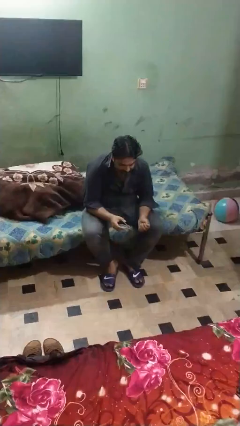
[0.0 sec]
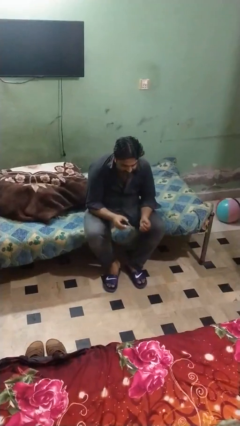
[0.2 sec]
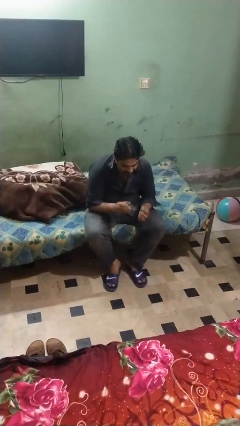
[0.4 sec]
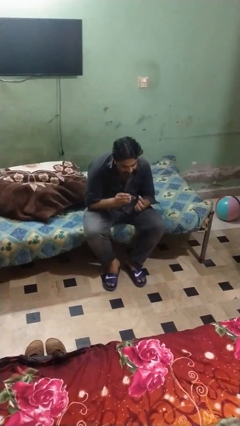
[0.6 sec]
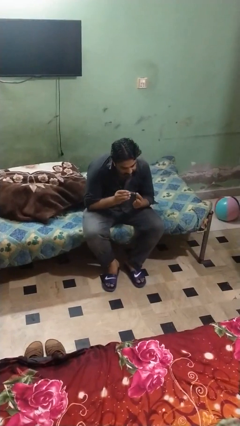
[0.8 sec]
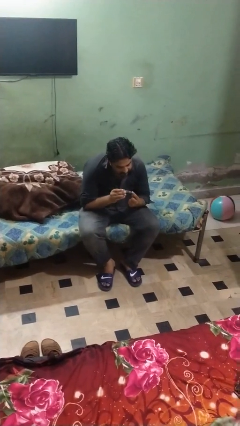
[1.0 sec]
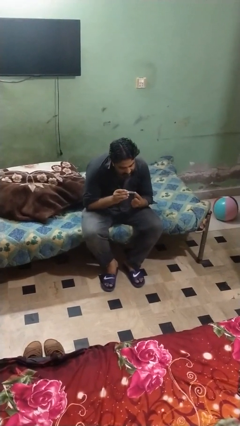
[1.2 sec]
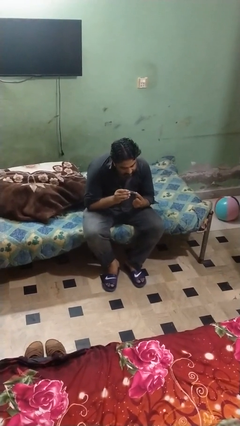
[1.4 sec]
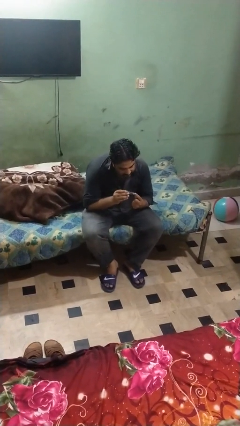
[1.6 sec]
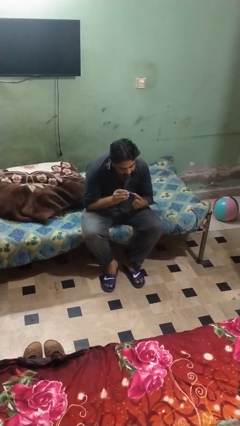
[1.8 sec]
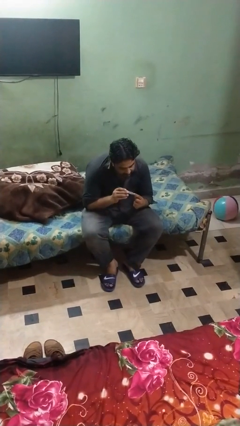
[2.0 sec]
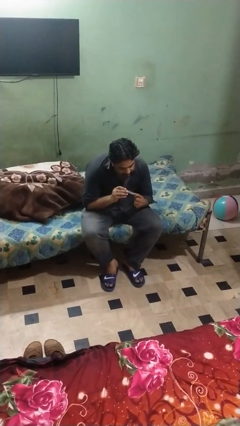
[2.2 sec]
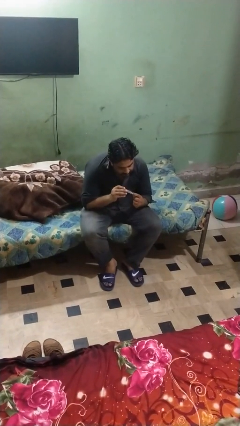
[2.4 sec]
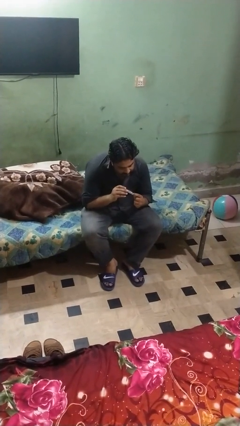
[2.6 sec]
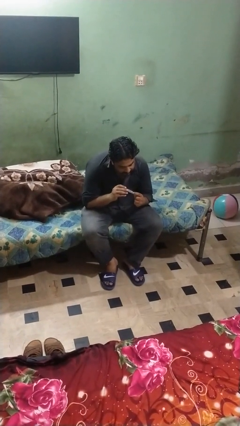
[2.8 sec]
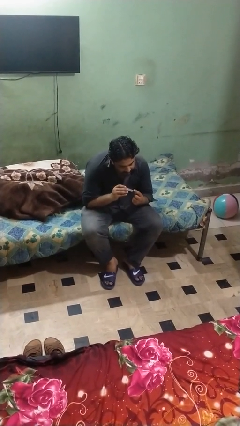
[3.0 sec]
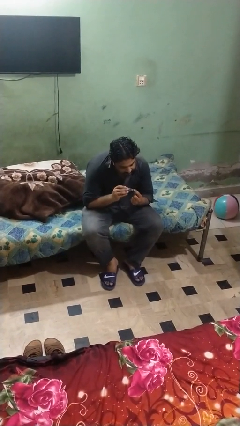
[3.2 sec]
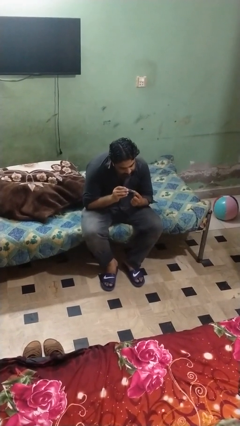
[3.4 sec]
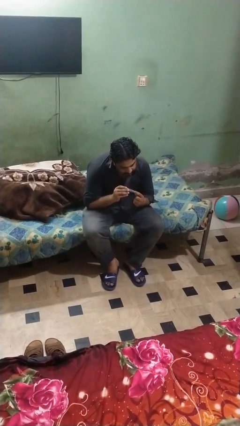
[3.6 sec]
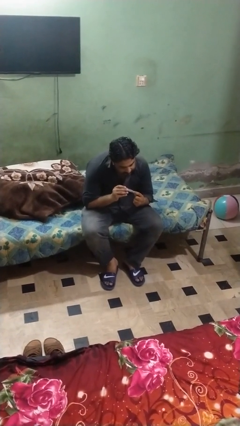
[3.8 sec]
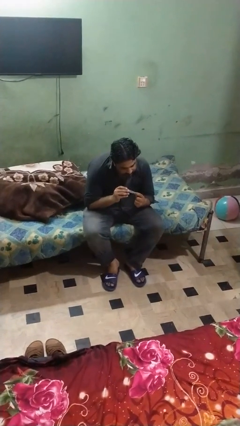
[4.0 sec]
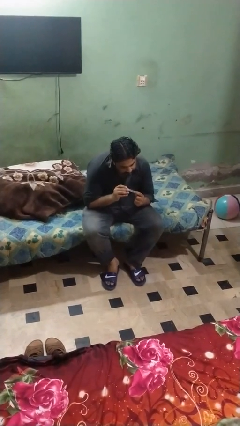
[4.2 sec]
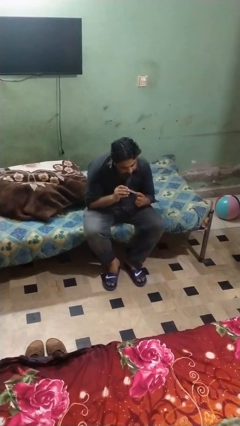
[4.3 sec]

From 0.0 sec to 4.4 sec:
person clips fingernails

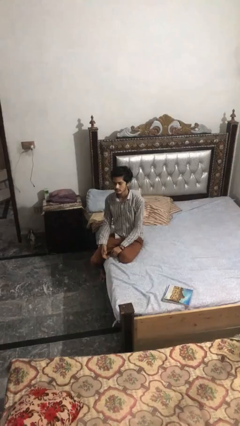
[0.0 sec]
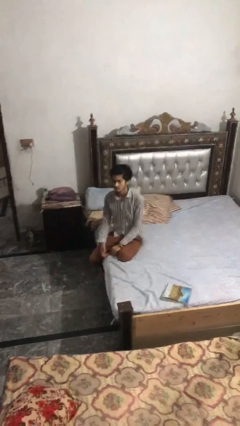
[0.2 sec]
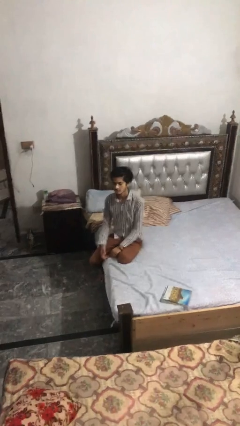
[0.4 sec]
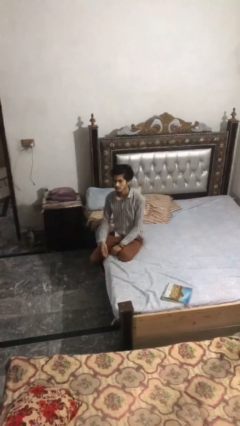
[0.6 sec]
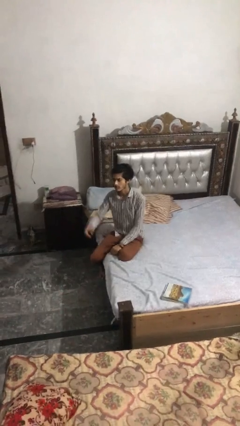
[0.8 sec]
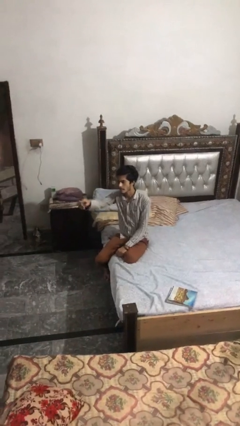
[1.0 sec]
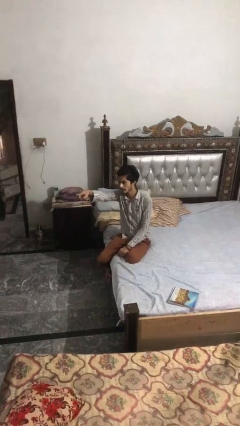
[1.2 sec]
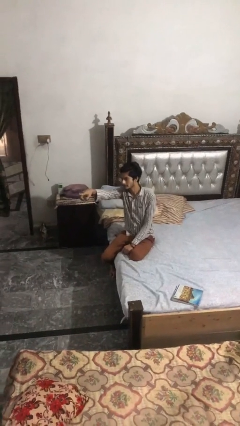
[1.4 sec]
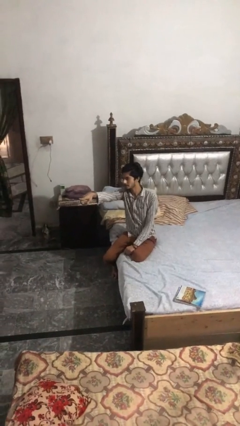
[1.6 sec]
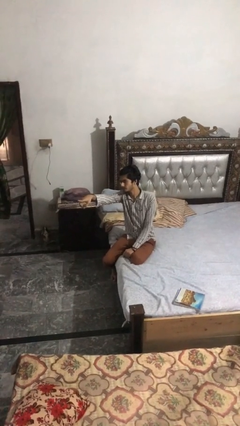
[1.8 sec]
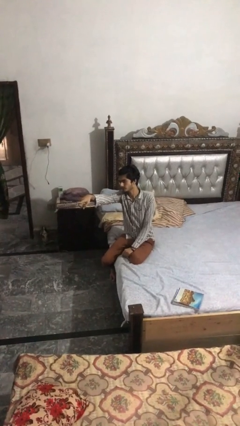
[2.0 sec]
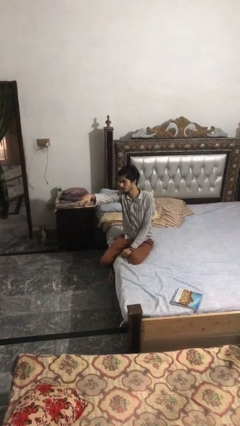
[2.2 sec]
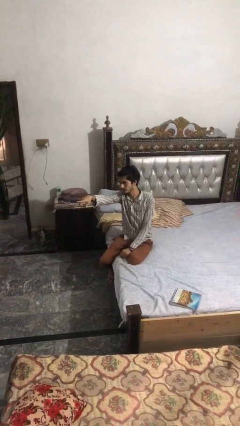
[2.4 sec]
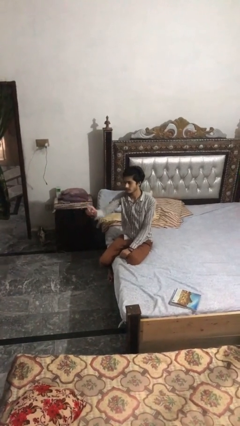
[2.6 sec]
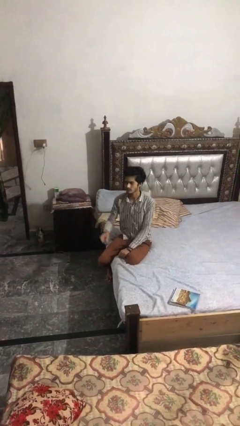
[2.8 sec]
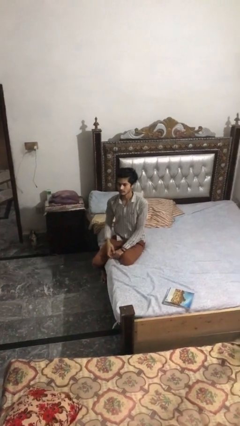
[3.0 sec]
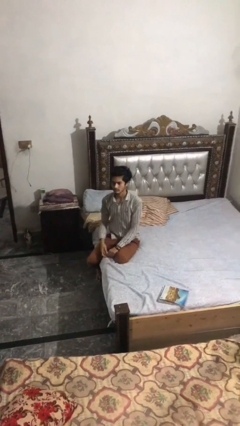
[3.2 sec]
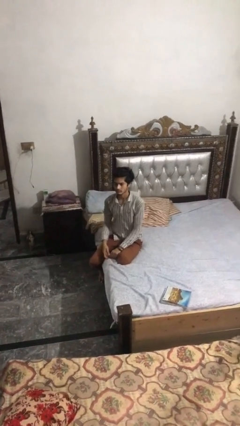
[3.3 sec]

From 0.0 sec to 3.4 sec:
person points at person

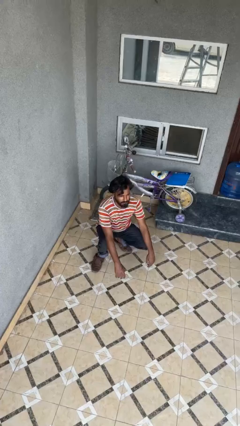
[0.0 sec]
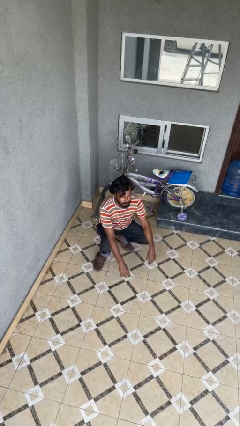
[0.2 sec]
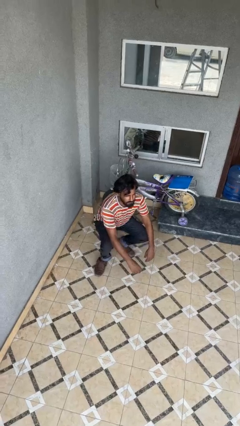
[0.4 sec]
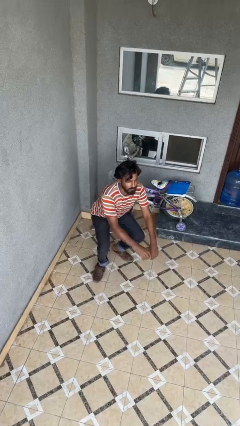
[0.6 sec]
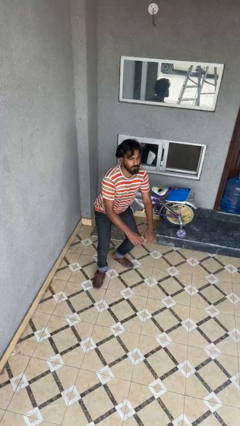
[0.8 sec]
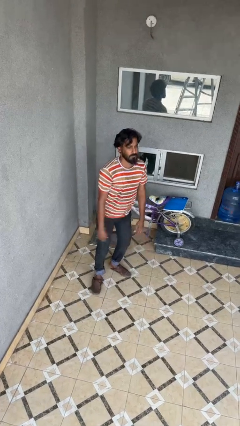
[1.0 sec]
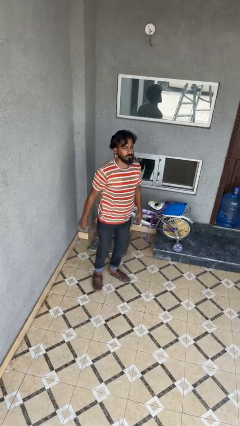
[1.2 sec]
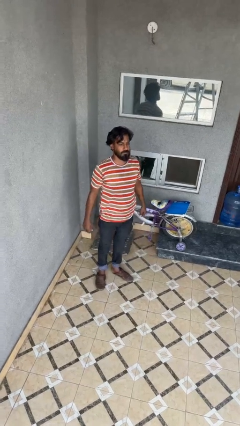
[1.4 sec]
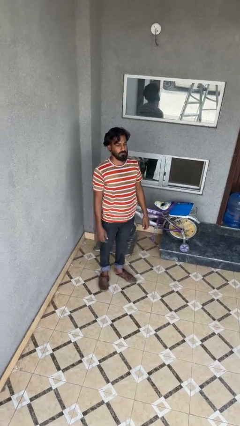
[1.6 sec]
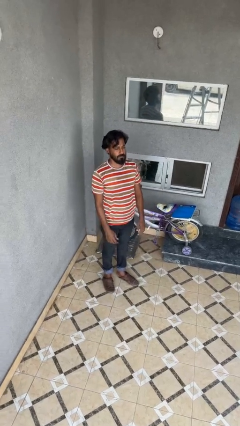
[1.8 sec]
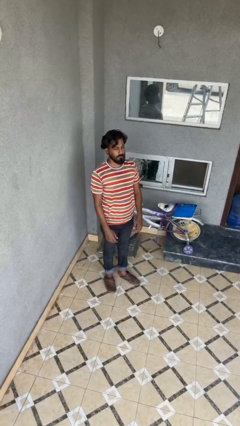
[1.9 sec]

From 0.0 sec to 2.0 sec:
person stands up

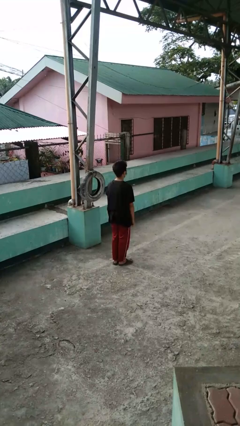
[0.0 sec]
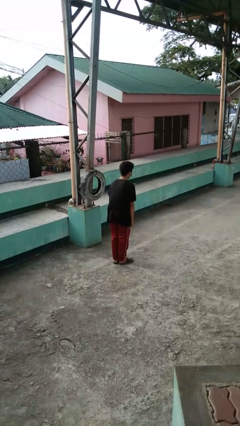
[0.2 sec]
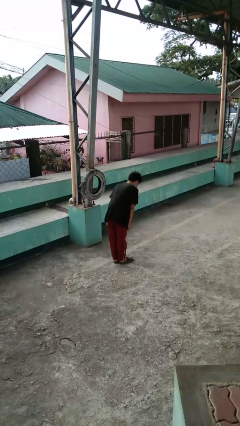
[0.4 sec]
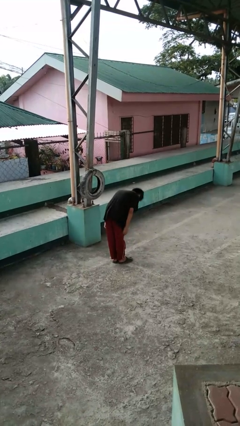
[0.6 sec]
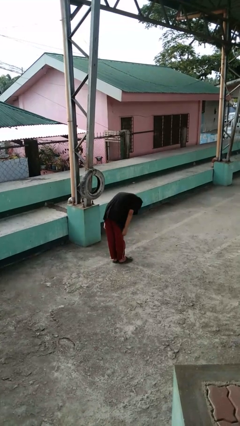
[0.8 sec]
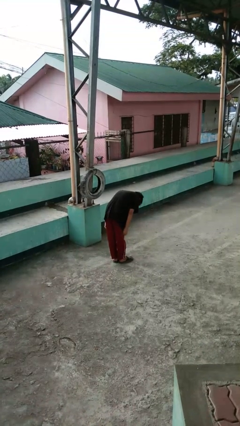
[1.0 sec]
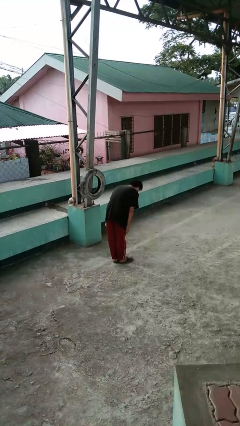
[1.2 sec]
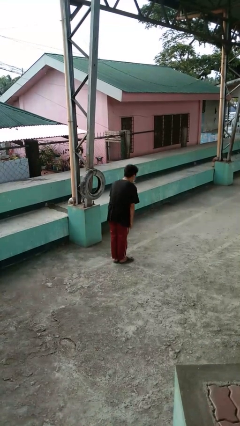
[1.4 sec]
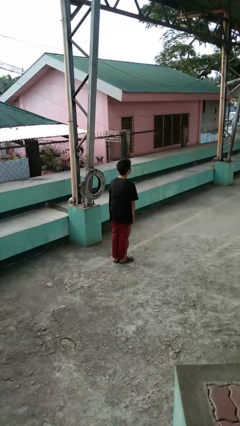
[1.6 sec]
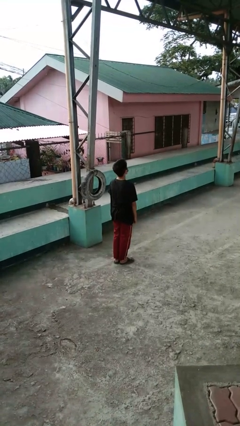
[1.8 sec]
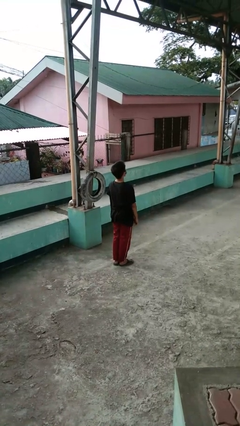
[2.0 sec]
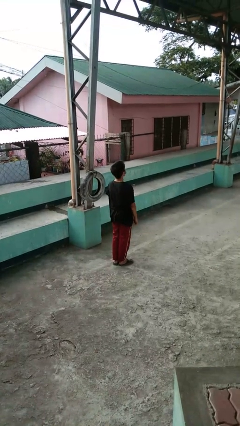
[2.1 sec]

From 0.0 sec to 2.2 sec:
person bows

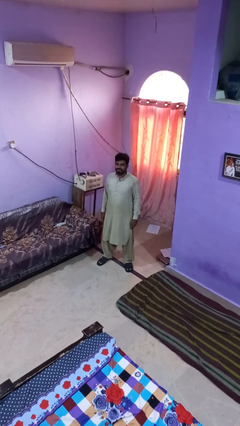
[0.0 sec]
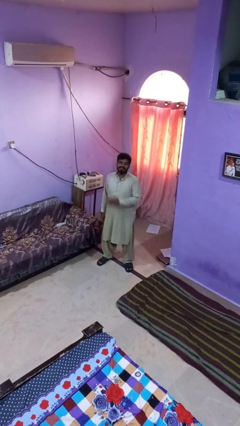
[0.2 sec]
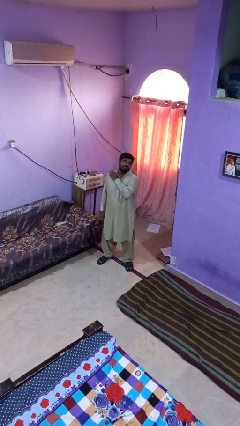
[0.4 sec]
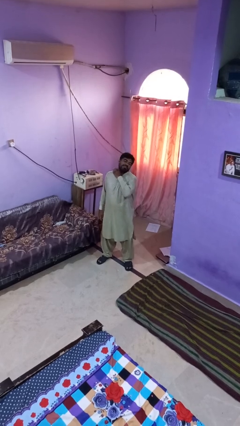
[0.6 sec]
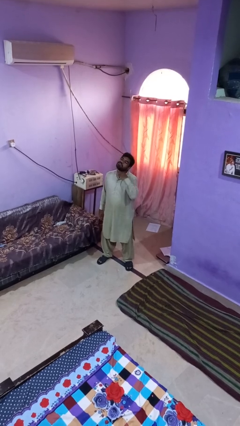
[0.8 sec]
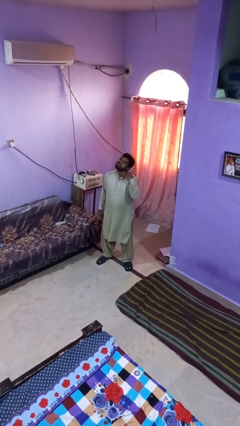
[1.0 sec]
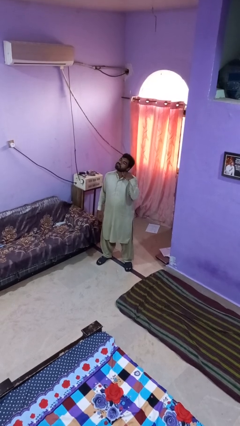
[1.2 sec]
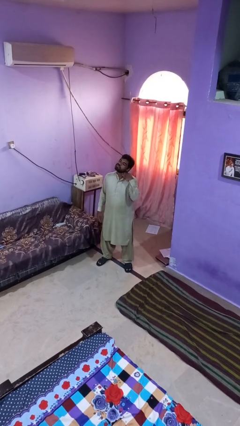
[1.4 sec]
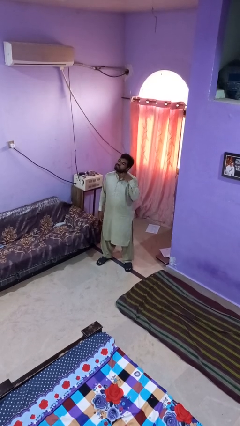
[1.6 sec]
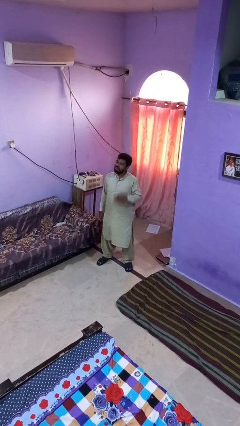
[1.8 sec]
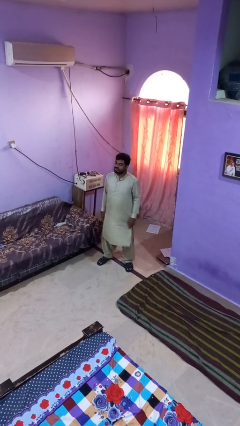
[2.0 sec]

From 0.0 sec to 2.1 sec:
person gestures cut

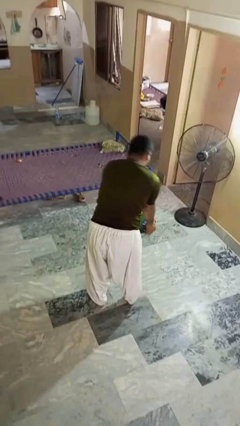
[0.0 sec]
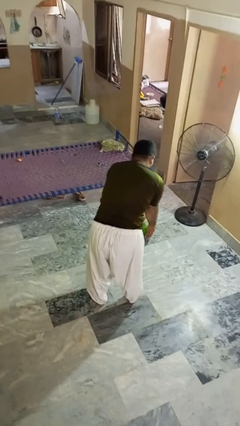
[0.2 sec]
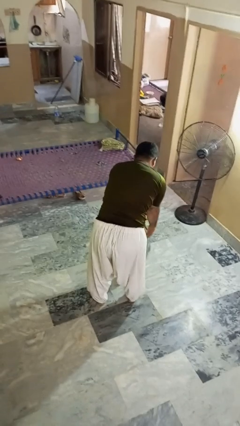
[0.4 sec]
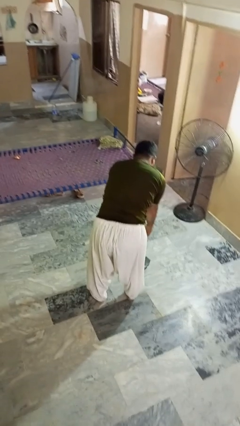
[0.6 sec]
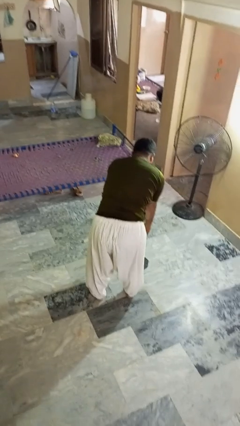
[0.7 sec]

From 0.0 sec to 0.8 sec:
person catches dropped object

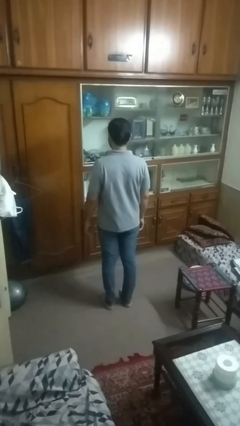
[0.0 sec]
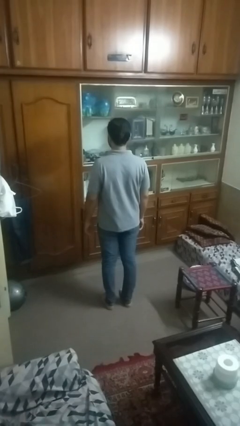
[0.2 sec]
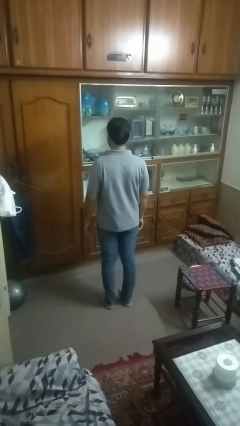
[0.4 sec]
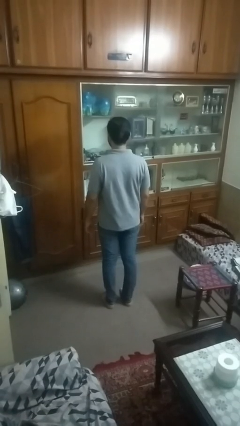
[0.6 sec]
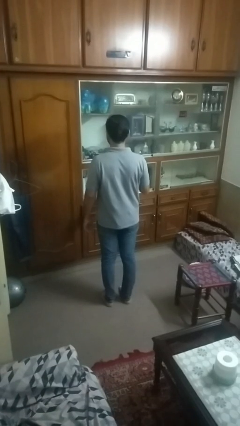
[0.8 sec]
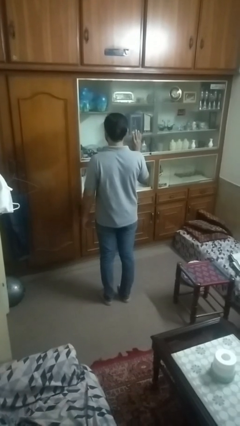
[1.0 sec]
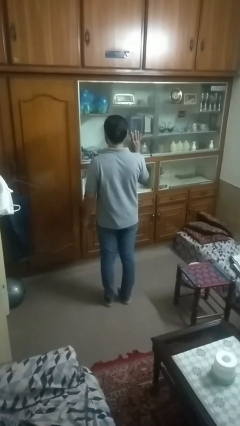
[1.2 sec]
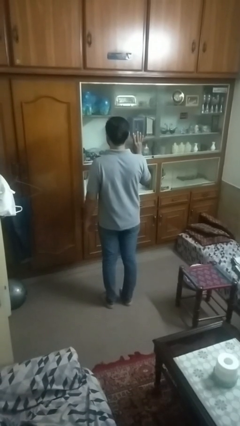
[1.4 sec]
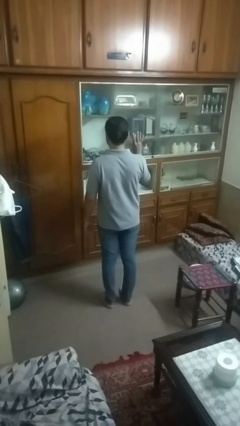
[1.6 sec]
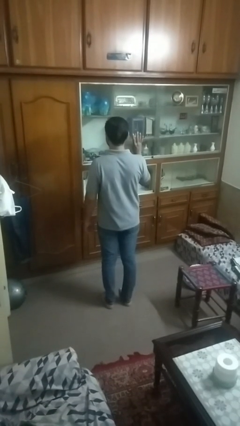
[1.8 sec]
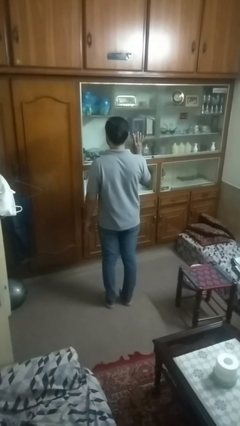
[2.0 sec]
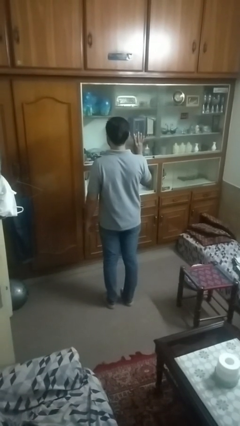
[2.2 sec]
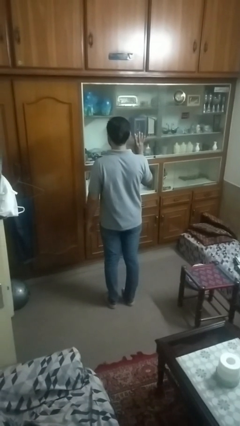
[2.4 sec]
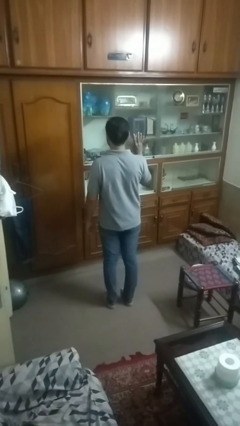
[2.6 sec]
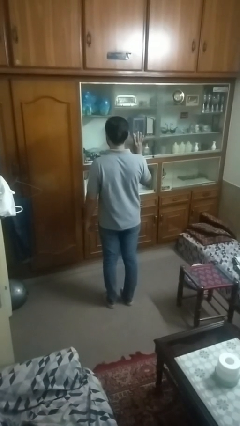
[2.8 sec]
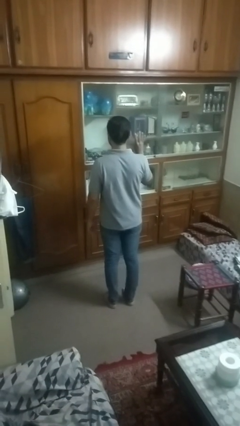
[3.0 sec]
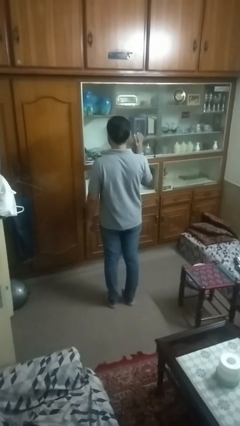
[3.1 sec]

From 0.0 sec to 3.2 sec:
person gestures number four
